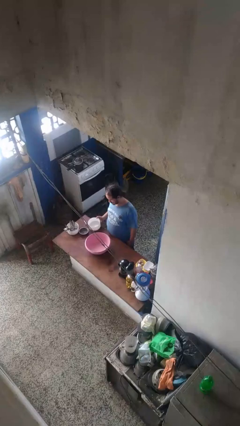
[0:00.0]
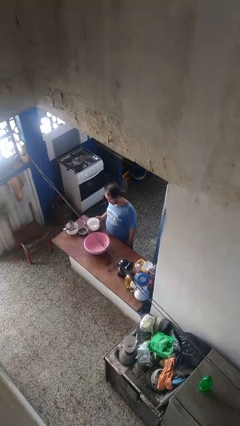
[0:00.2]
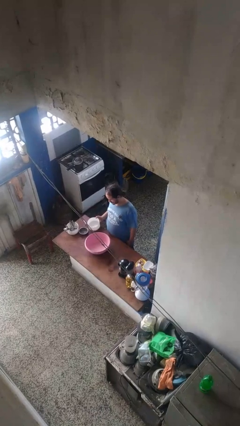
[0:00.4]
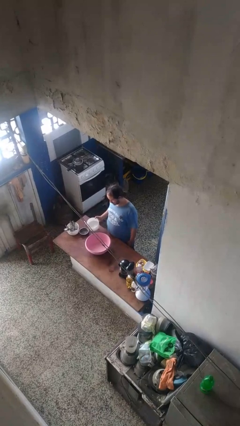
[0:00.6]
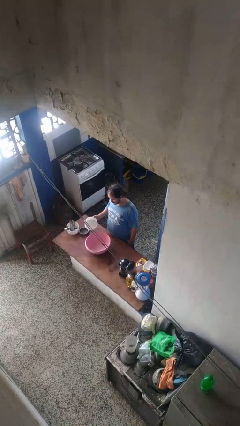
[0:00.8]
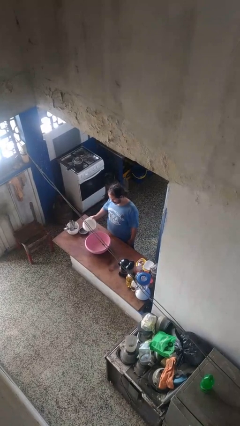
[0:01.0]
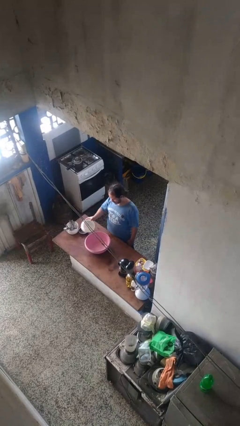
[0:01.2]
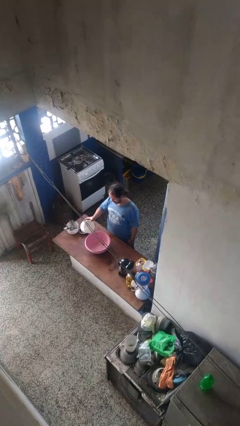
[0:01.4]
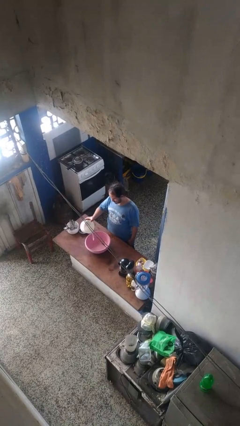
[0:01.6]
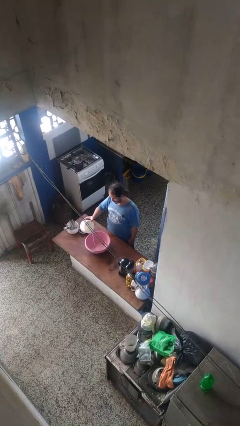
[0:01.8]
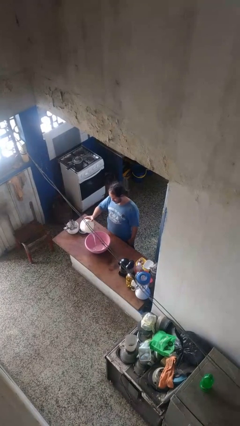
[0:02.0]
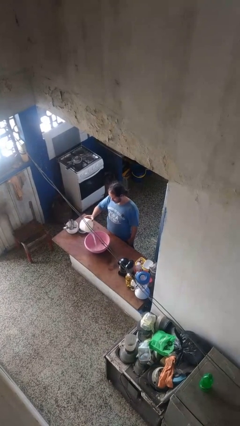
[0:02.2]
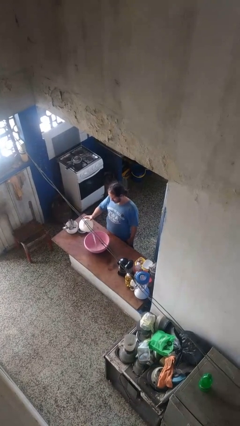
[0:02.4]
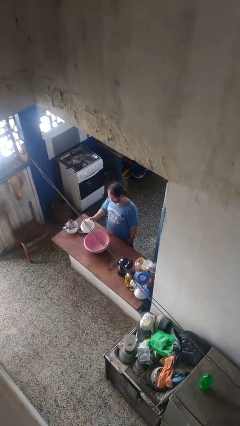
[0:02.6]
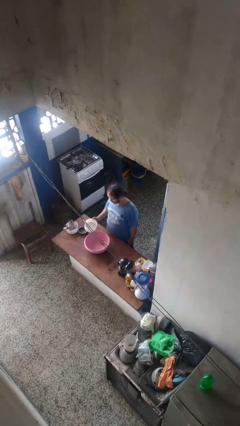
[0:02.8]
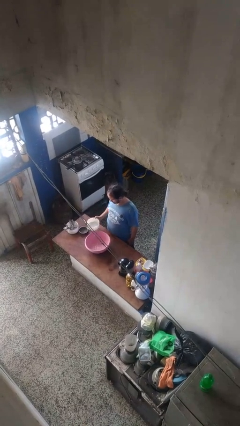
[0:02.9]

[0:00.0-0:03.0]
person pours into bowl

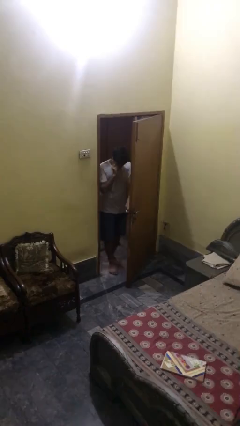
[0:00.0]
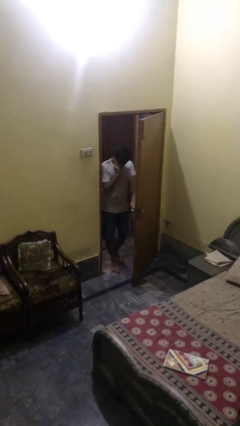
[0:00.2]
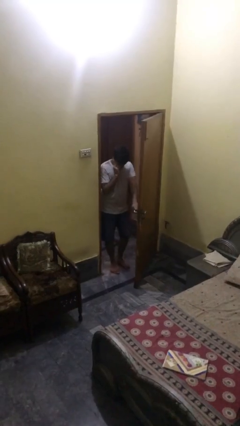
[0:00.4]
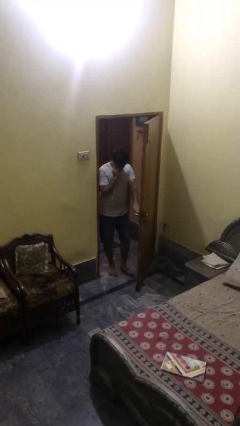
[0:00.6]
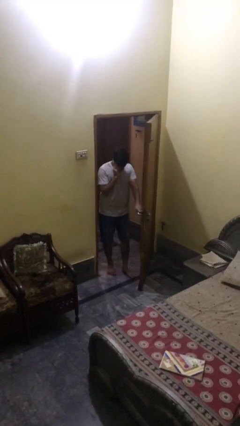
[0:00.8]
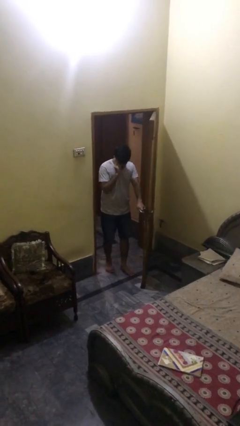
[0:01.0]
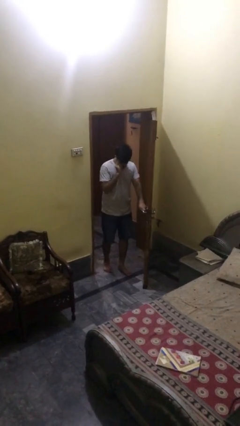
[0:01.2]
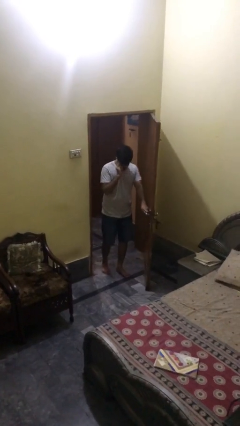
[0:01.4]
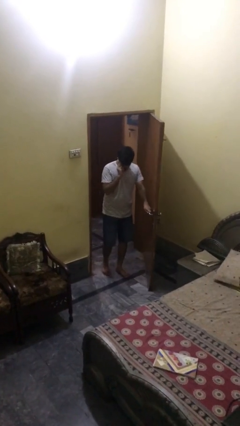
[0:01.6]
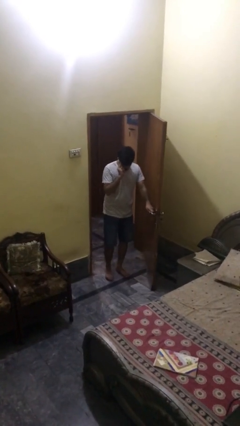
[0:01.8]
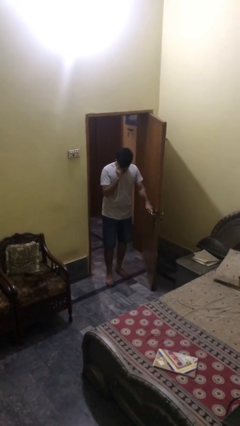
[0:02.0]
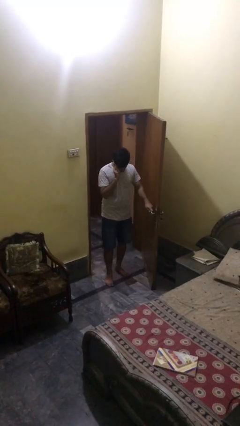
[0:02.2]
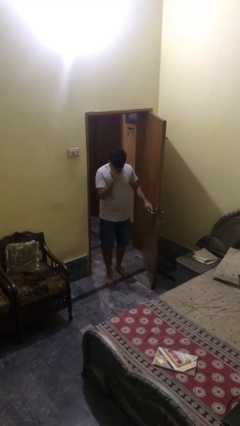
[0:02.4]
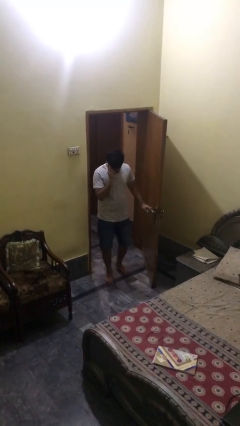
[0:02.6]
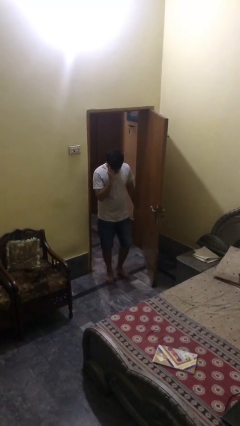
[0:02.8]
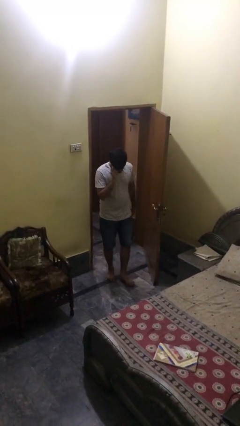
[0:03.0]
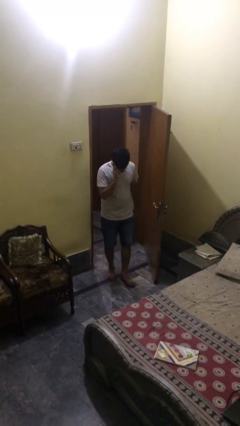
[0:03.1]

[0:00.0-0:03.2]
person opens facility door

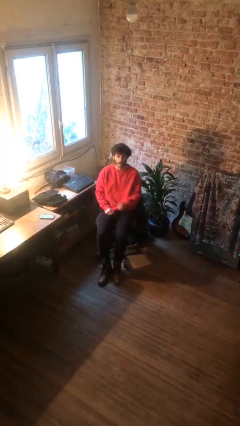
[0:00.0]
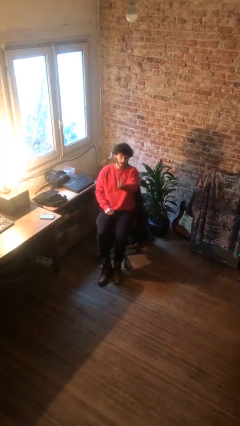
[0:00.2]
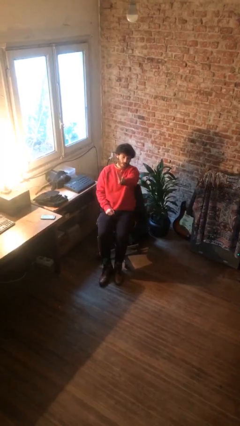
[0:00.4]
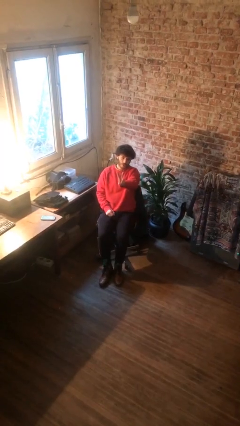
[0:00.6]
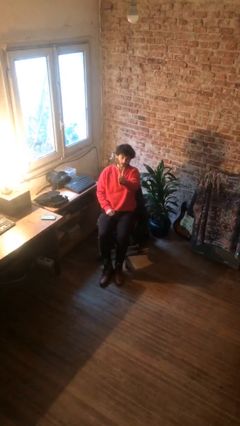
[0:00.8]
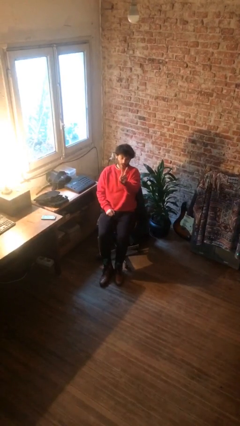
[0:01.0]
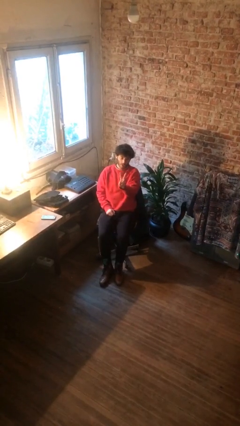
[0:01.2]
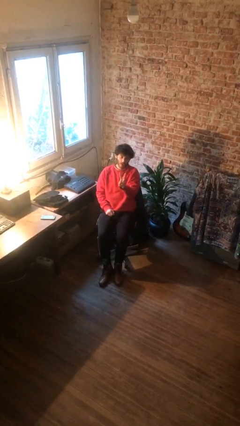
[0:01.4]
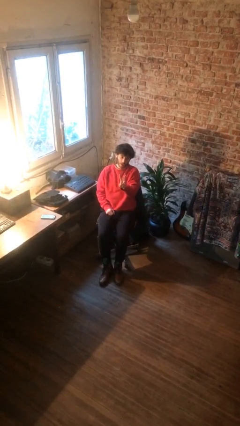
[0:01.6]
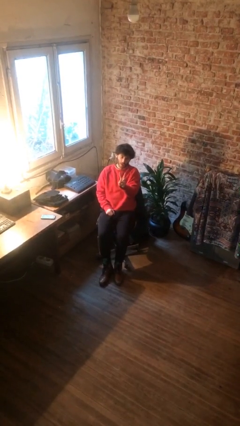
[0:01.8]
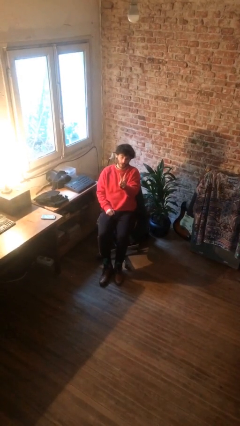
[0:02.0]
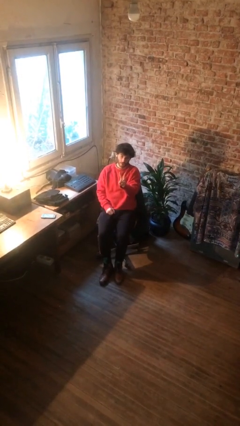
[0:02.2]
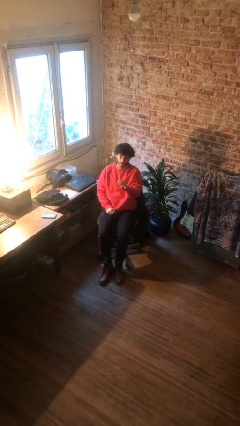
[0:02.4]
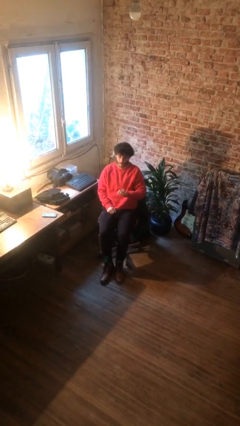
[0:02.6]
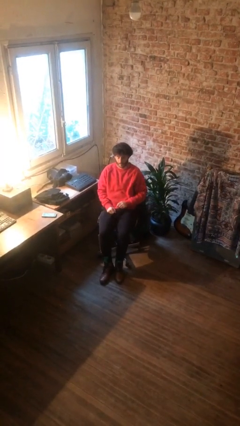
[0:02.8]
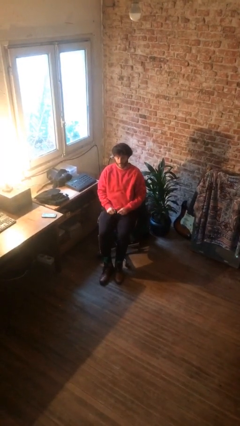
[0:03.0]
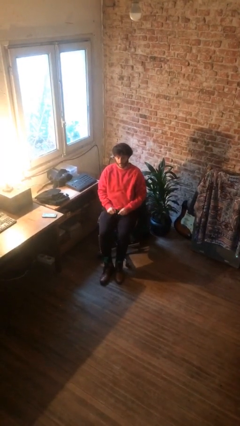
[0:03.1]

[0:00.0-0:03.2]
person gestures peace

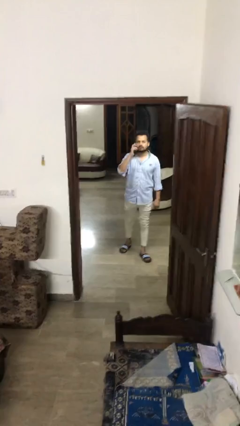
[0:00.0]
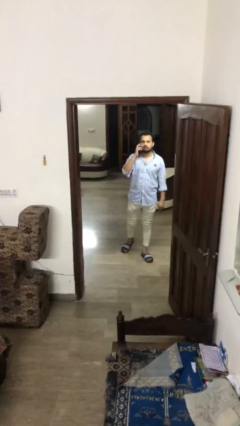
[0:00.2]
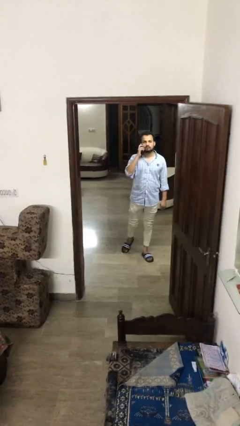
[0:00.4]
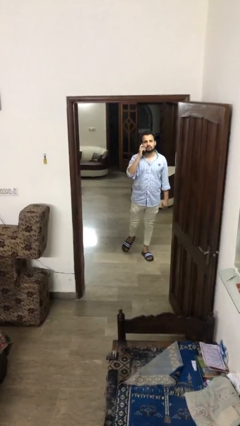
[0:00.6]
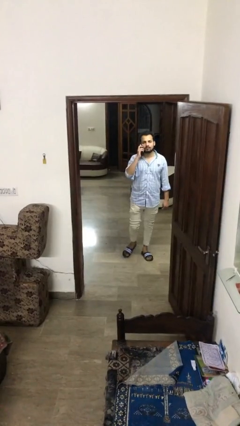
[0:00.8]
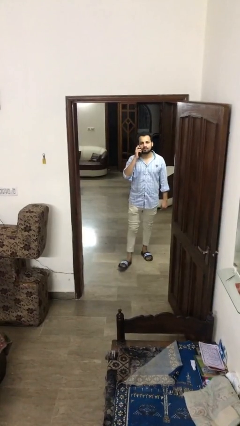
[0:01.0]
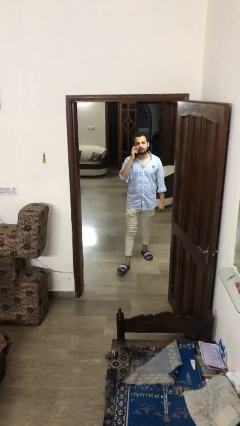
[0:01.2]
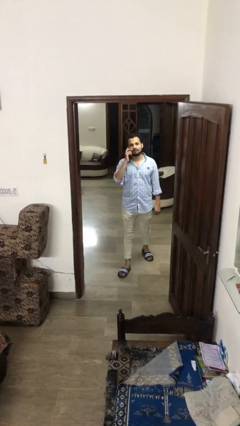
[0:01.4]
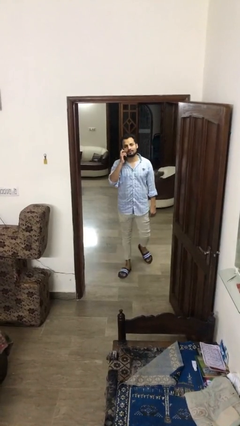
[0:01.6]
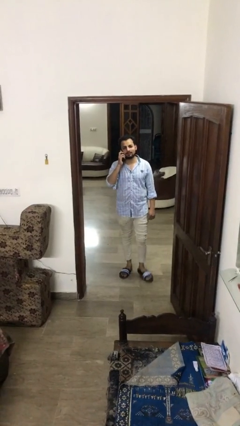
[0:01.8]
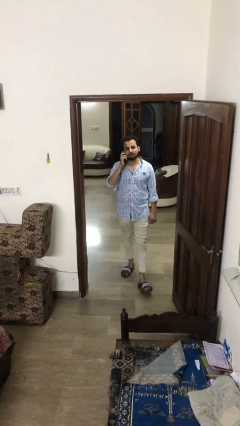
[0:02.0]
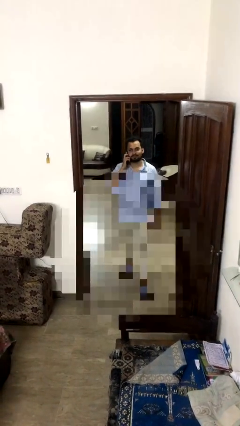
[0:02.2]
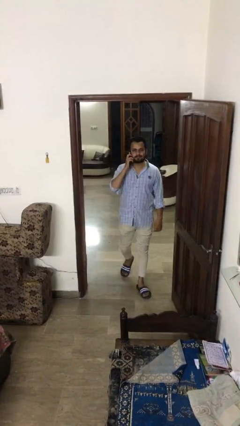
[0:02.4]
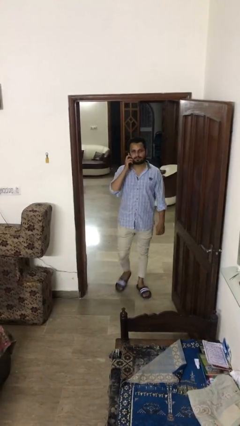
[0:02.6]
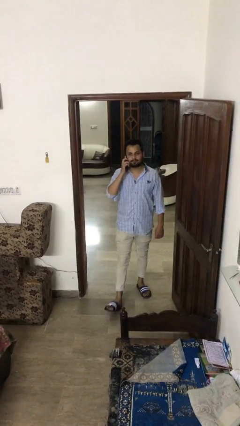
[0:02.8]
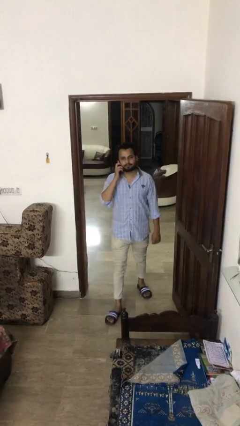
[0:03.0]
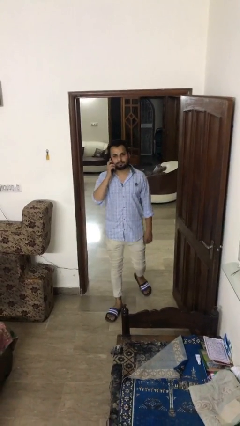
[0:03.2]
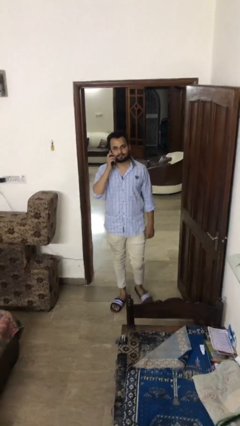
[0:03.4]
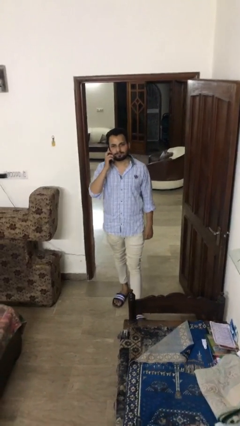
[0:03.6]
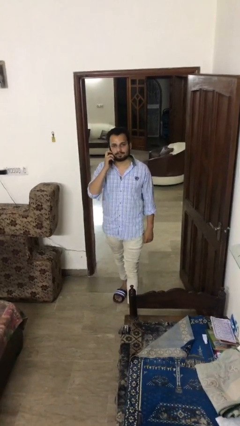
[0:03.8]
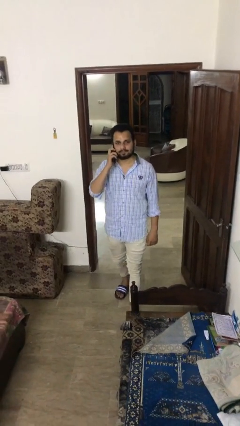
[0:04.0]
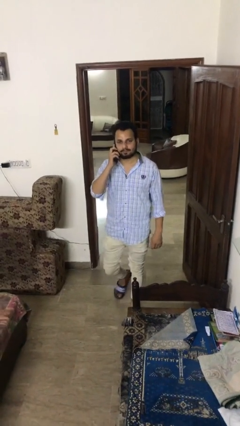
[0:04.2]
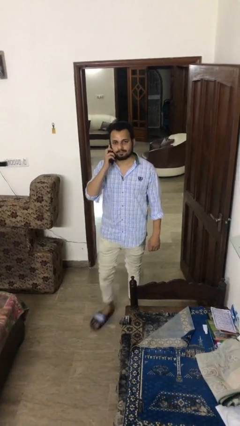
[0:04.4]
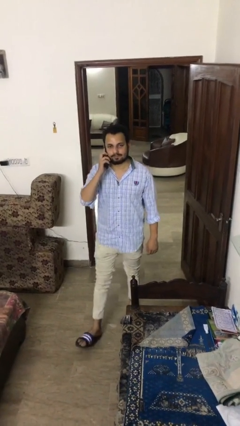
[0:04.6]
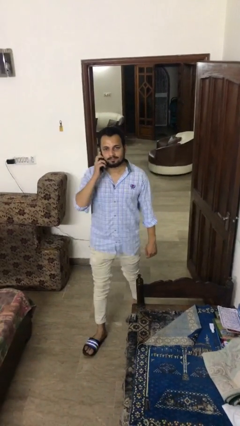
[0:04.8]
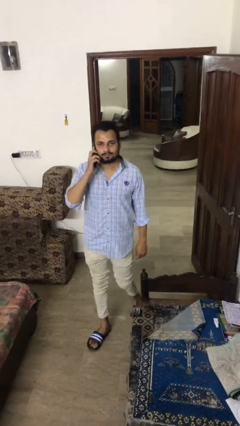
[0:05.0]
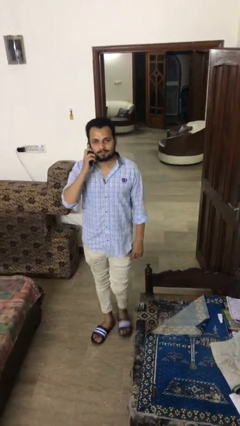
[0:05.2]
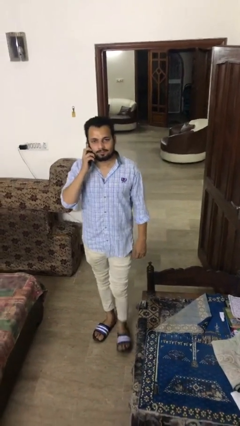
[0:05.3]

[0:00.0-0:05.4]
person enters scene through structure

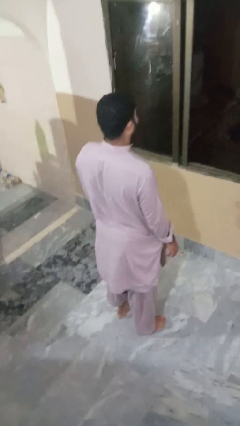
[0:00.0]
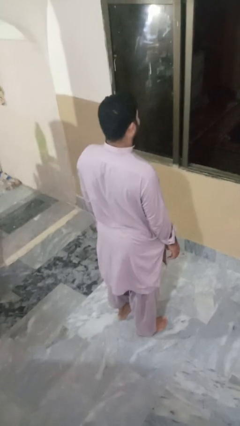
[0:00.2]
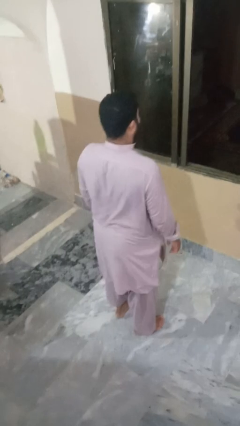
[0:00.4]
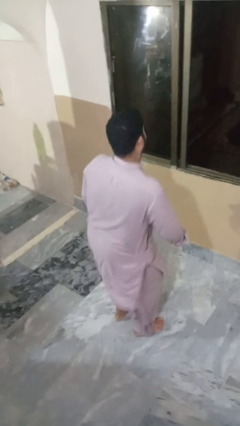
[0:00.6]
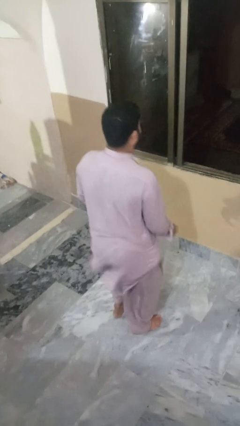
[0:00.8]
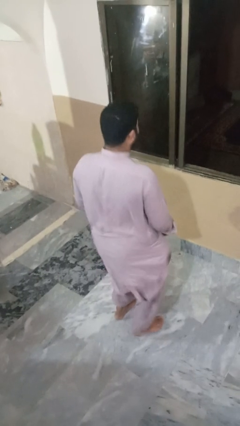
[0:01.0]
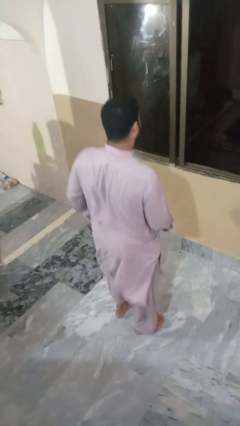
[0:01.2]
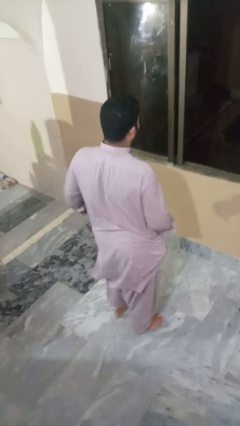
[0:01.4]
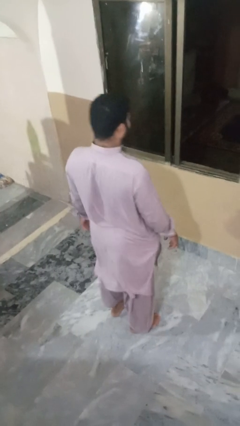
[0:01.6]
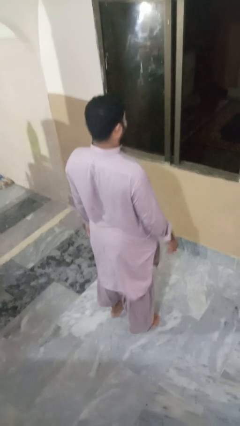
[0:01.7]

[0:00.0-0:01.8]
person wiggles hips

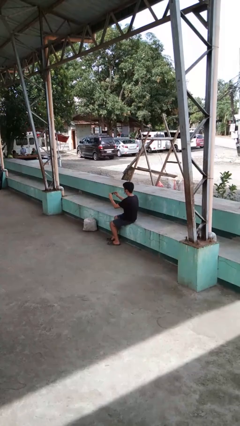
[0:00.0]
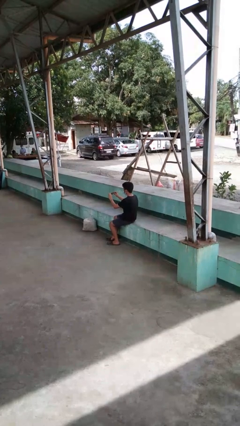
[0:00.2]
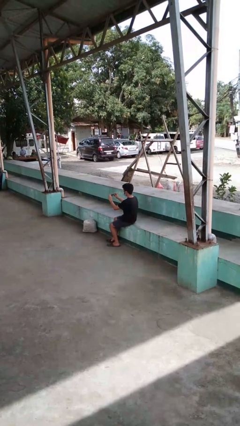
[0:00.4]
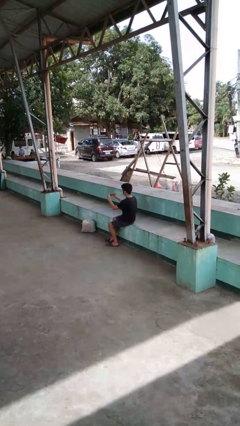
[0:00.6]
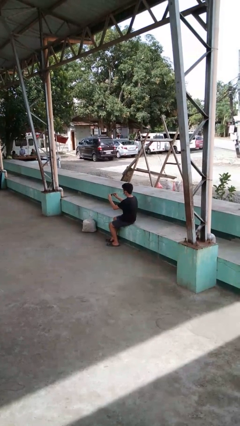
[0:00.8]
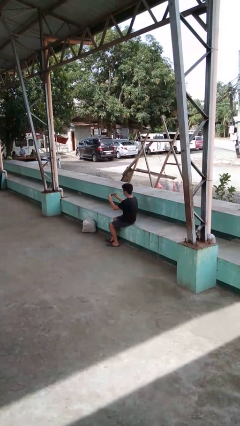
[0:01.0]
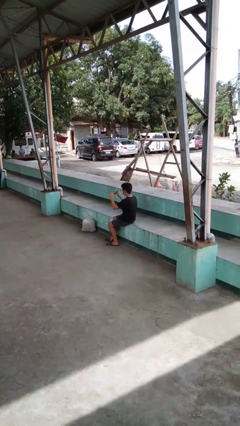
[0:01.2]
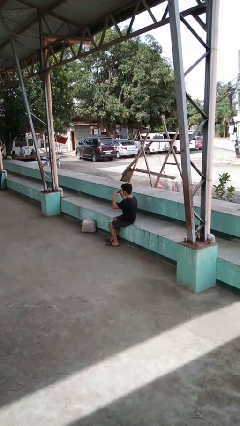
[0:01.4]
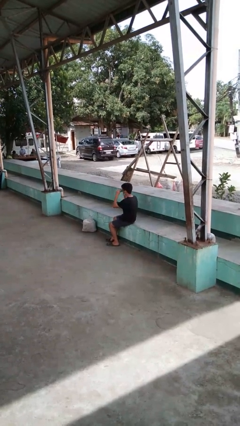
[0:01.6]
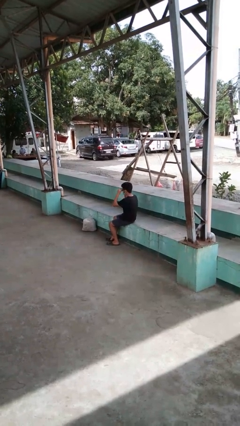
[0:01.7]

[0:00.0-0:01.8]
person brushes hair
